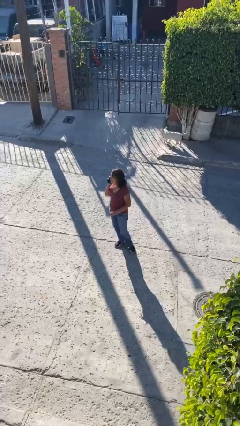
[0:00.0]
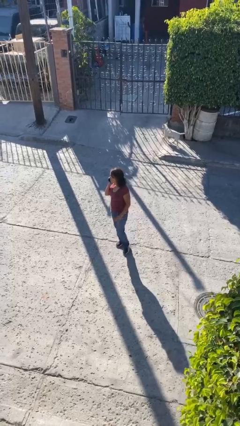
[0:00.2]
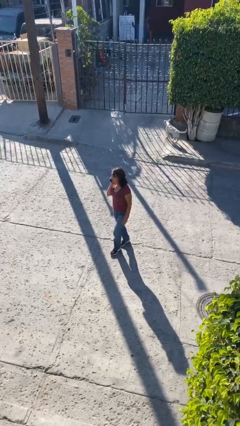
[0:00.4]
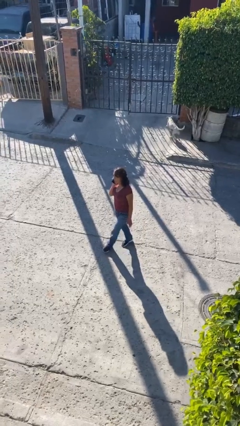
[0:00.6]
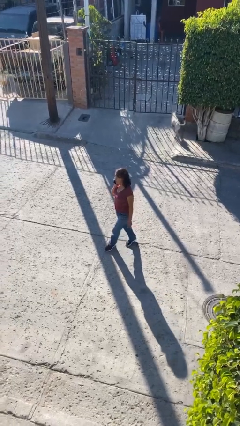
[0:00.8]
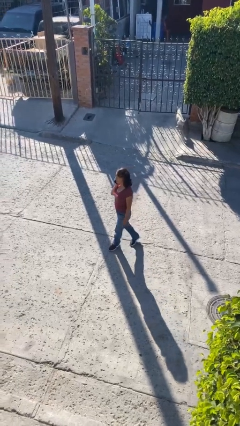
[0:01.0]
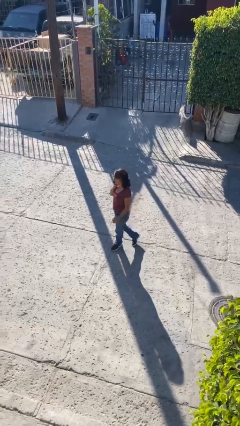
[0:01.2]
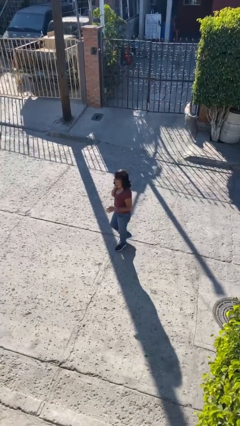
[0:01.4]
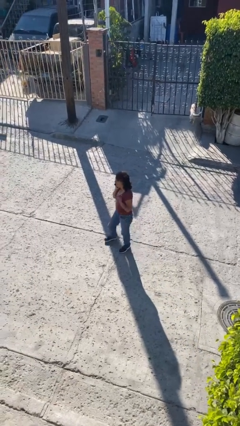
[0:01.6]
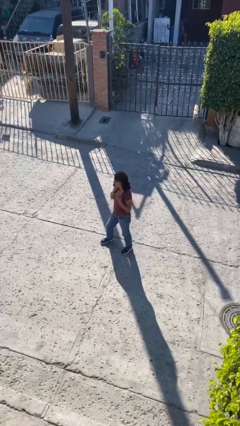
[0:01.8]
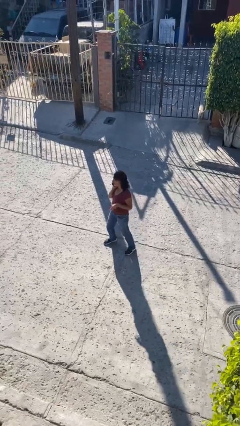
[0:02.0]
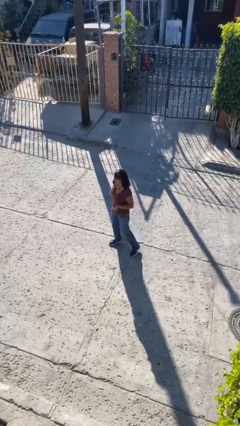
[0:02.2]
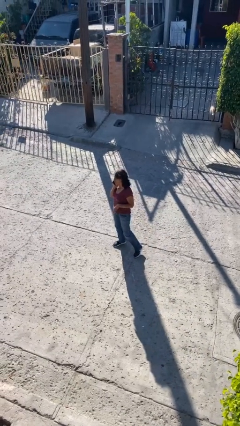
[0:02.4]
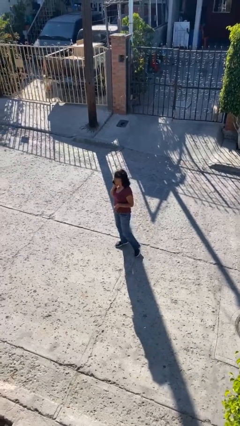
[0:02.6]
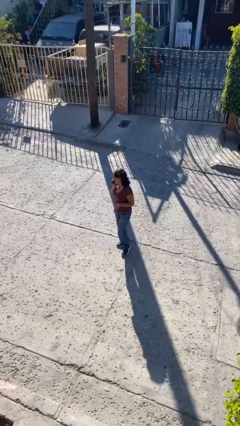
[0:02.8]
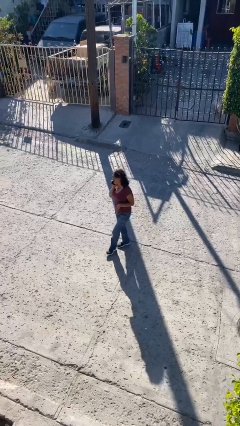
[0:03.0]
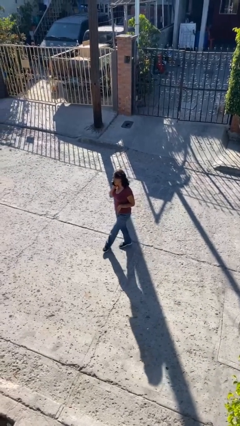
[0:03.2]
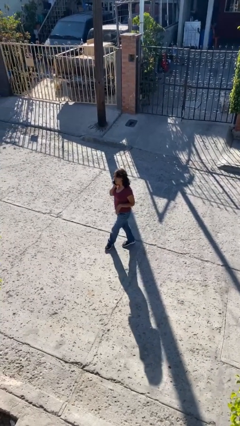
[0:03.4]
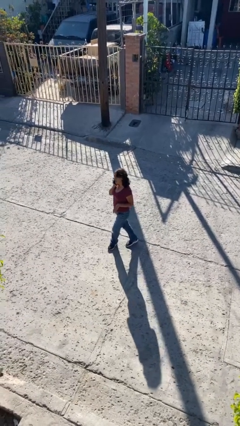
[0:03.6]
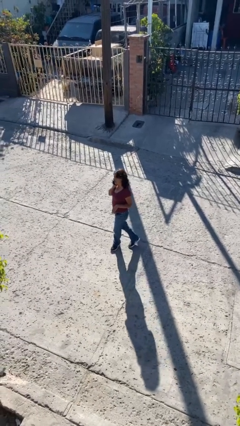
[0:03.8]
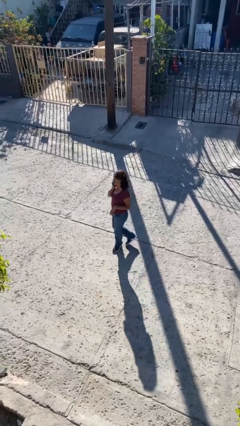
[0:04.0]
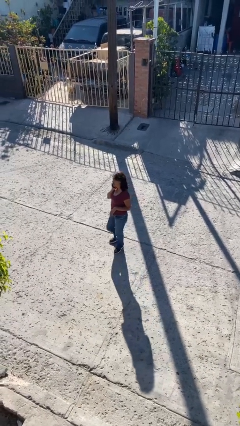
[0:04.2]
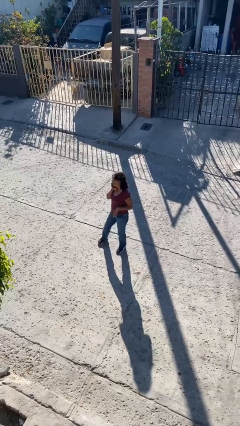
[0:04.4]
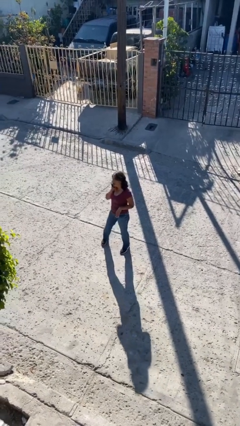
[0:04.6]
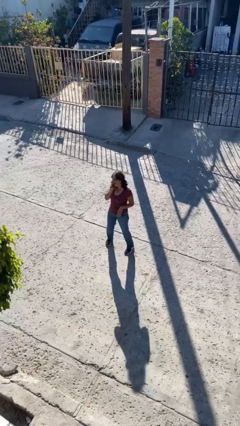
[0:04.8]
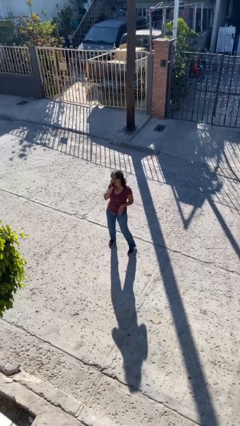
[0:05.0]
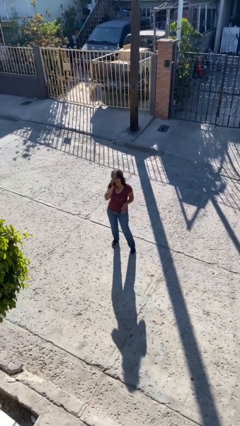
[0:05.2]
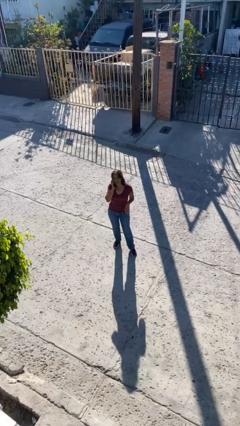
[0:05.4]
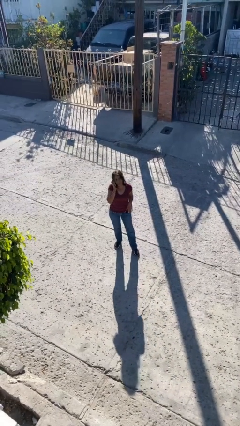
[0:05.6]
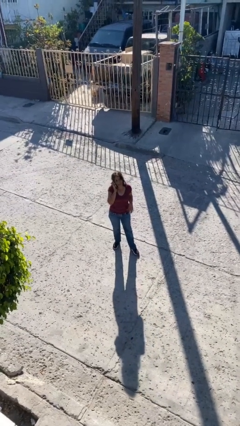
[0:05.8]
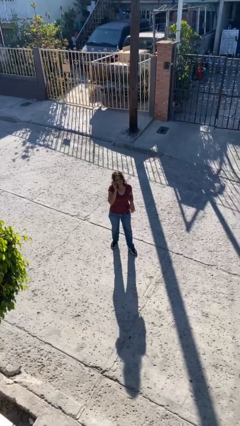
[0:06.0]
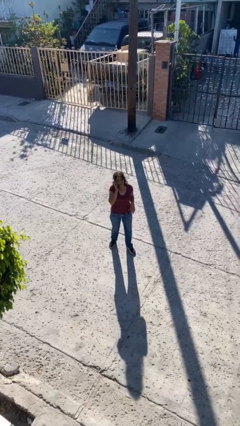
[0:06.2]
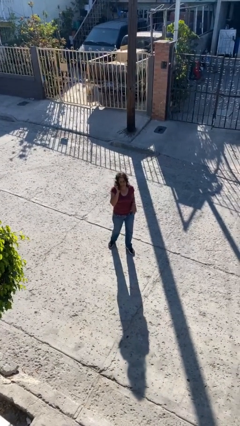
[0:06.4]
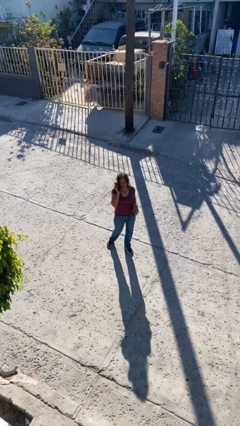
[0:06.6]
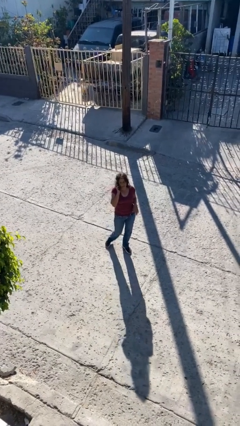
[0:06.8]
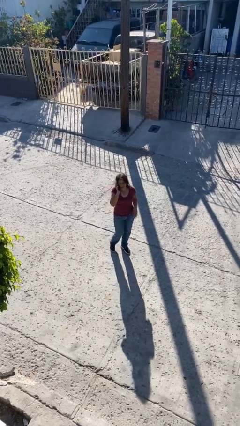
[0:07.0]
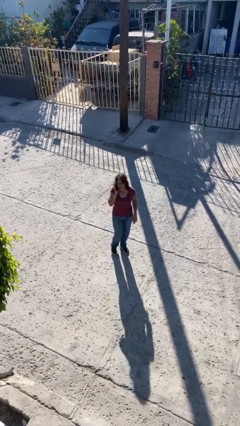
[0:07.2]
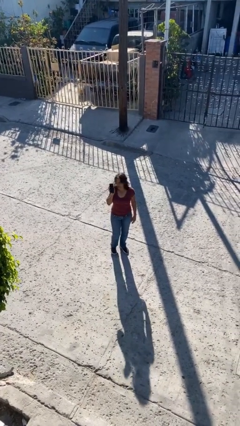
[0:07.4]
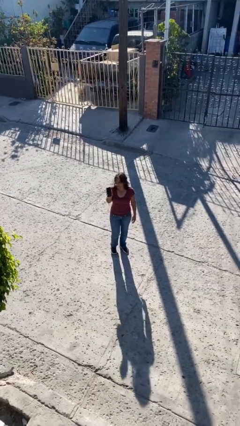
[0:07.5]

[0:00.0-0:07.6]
person talks on phone

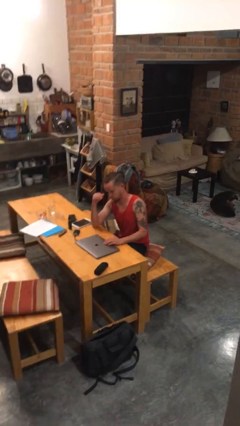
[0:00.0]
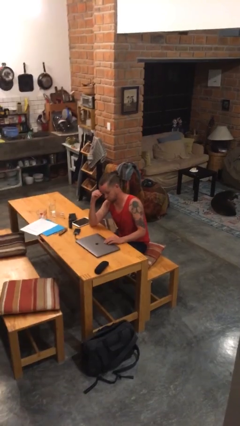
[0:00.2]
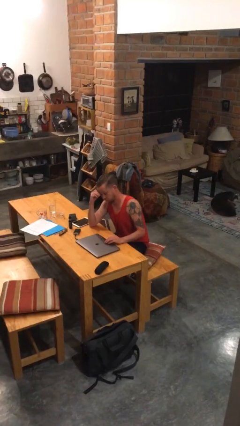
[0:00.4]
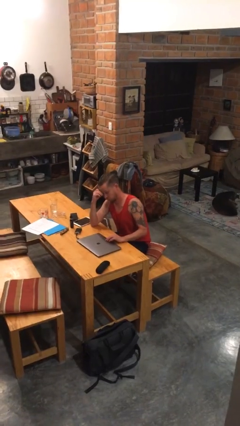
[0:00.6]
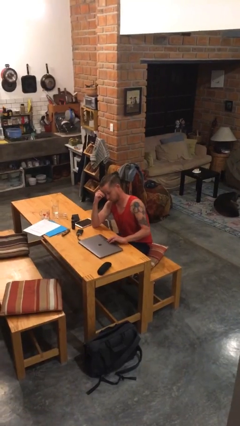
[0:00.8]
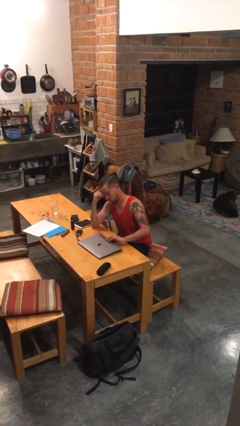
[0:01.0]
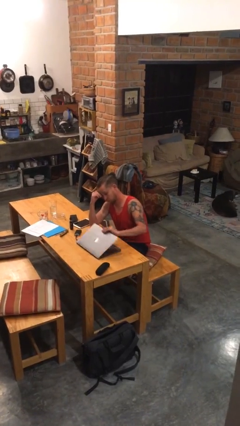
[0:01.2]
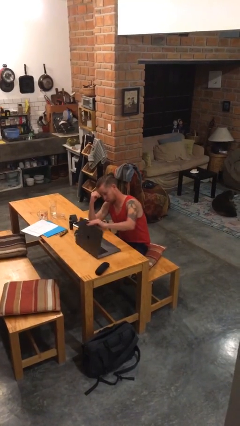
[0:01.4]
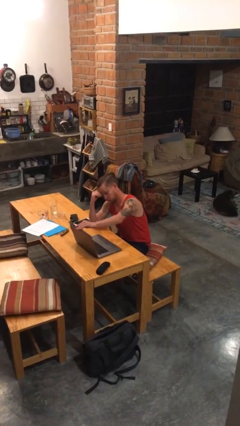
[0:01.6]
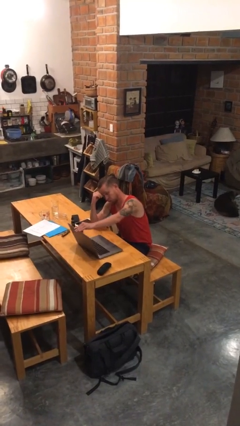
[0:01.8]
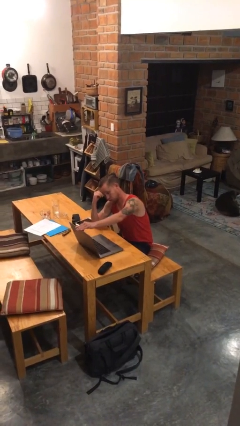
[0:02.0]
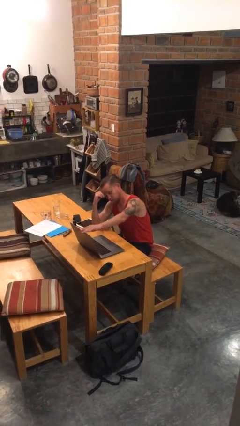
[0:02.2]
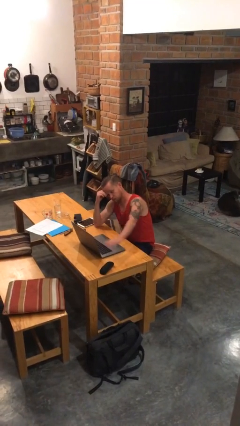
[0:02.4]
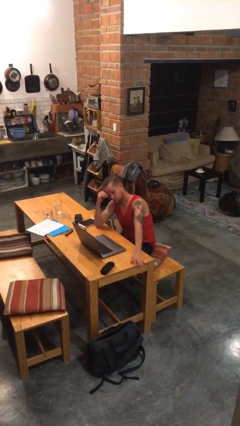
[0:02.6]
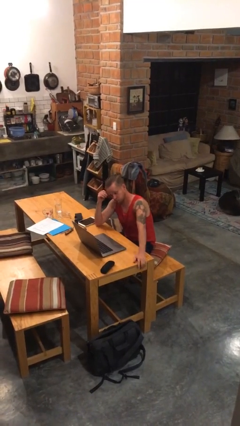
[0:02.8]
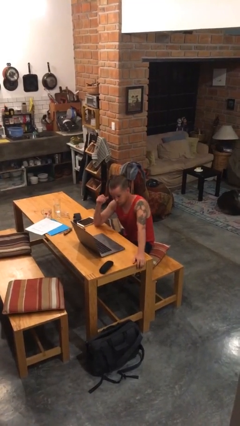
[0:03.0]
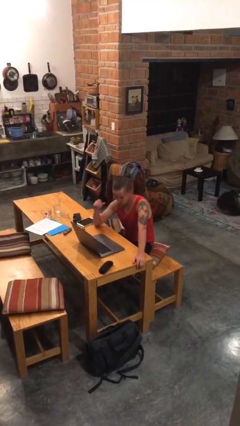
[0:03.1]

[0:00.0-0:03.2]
person opens laptop

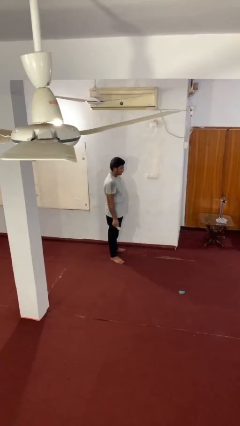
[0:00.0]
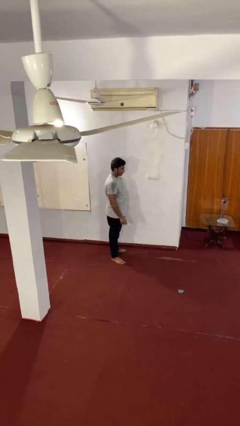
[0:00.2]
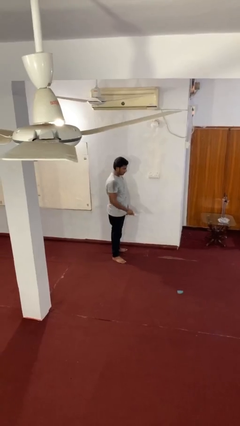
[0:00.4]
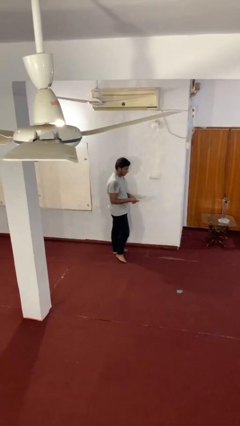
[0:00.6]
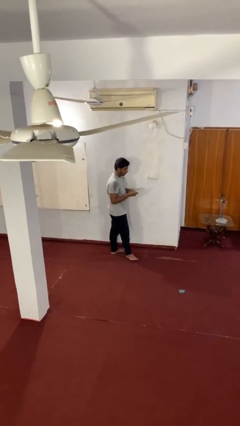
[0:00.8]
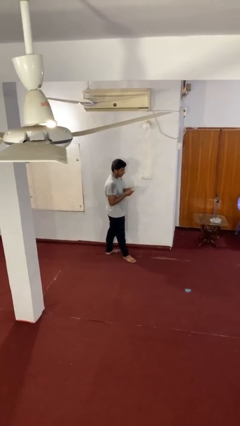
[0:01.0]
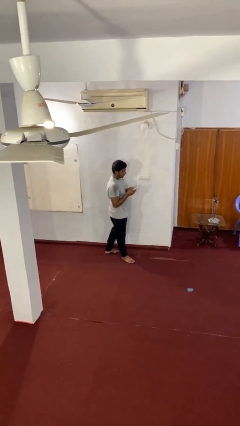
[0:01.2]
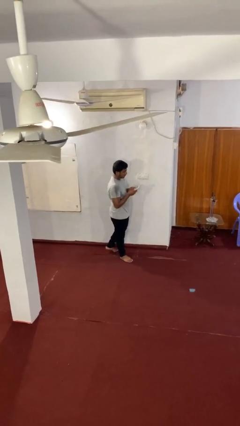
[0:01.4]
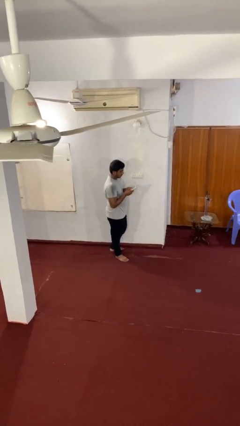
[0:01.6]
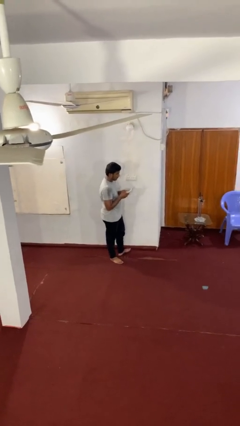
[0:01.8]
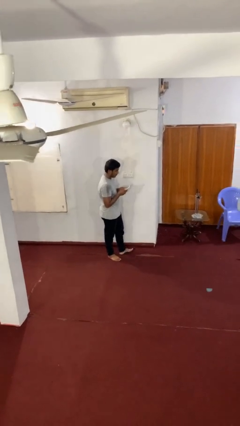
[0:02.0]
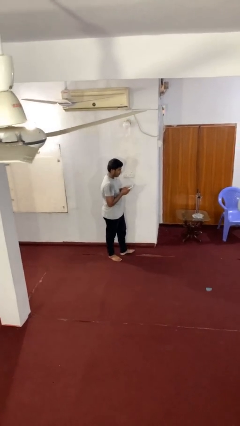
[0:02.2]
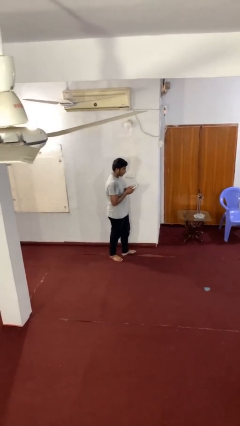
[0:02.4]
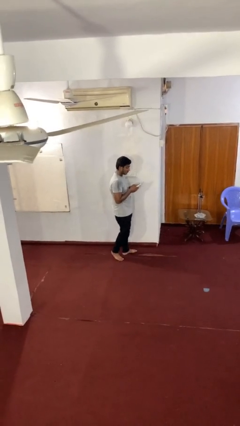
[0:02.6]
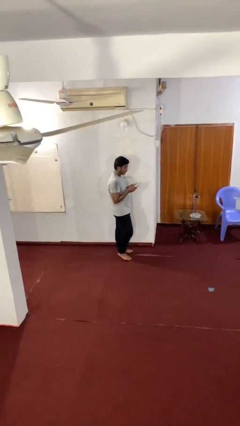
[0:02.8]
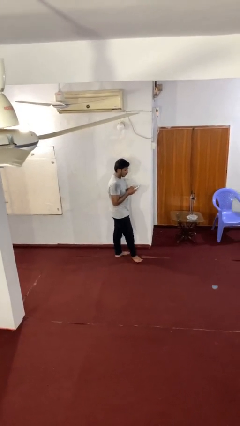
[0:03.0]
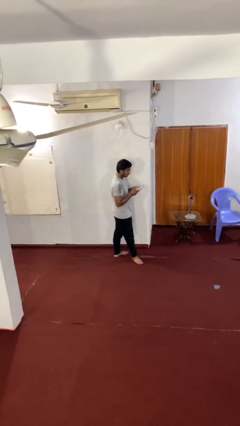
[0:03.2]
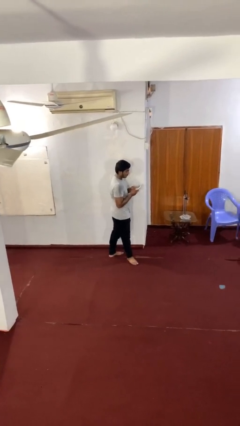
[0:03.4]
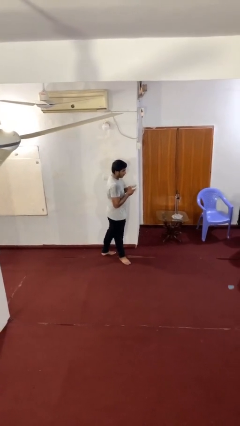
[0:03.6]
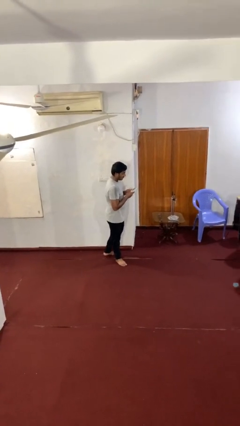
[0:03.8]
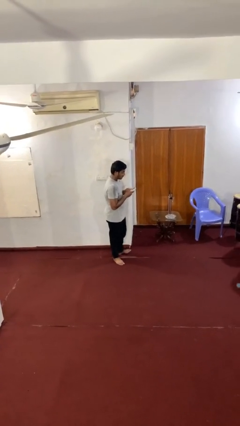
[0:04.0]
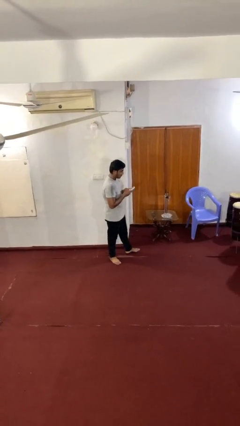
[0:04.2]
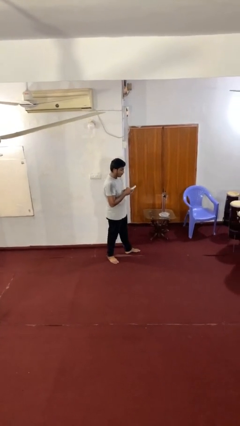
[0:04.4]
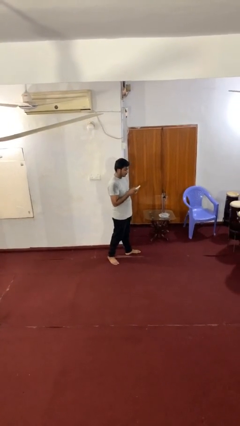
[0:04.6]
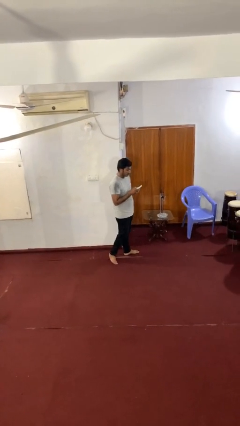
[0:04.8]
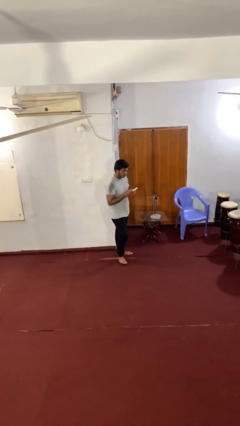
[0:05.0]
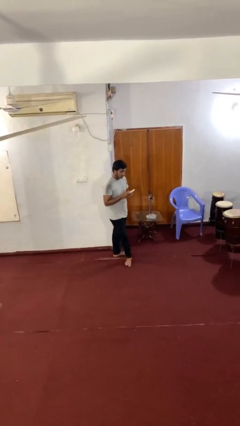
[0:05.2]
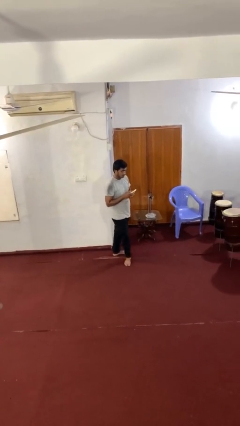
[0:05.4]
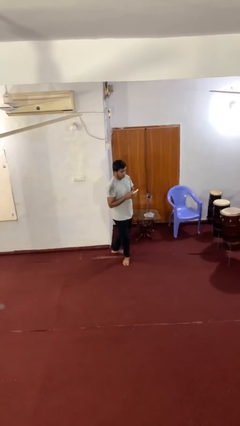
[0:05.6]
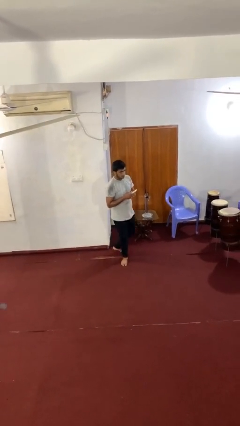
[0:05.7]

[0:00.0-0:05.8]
person texts on phone

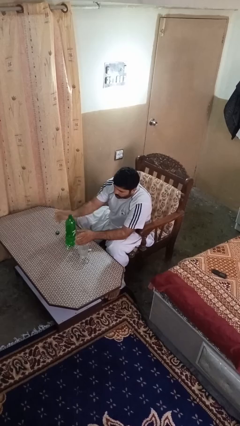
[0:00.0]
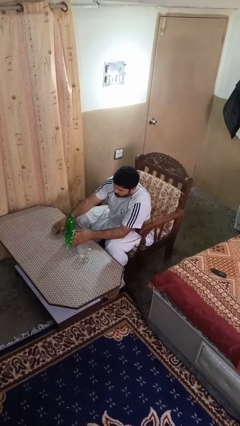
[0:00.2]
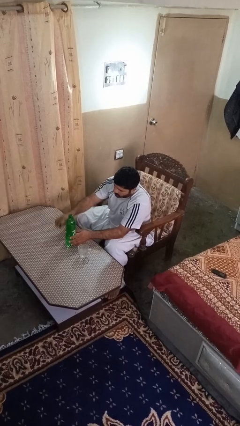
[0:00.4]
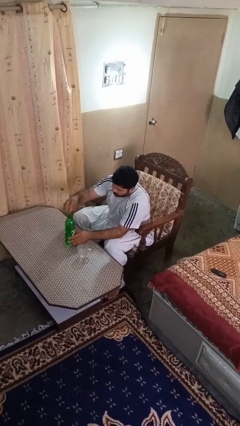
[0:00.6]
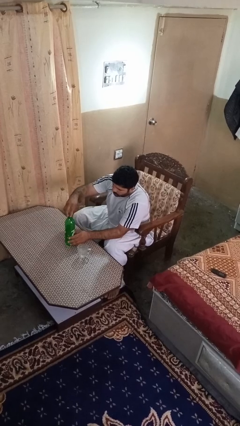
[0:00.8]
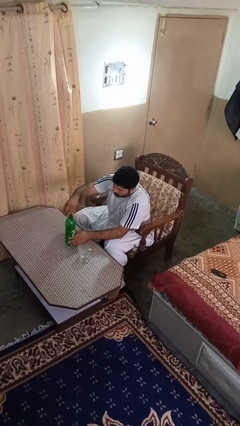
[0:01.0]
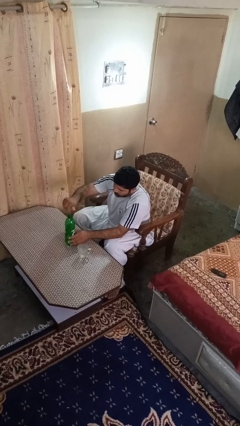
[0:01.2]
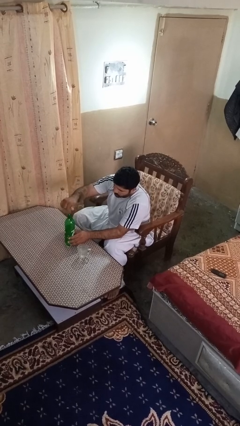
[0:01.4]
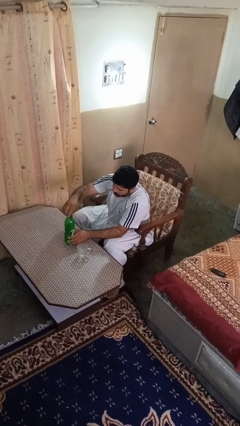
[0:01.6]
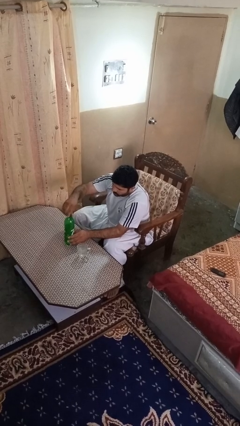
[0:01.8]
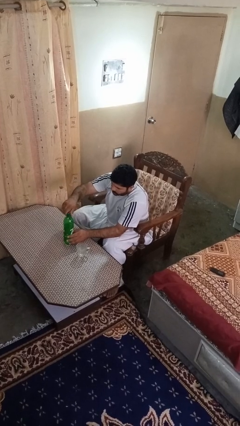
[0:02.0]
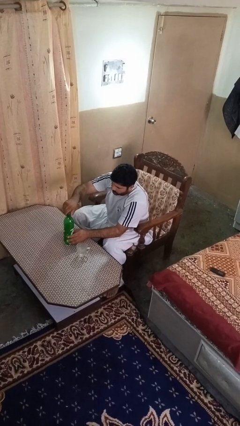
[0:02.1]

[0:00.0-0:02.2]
person screws lid to bottle
